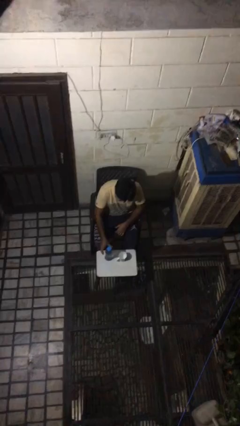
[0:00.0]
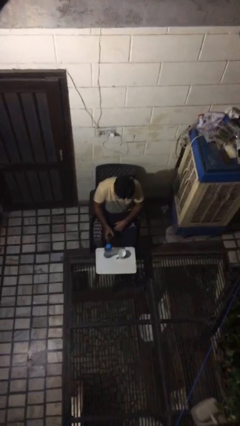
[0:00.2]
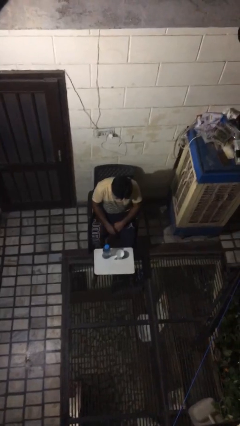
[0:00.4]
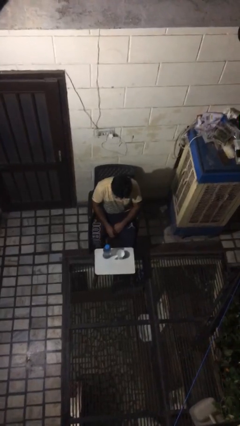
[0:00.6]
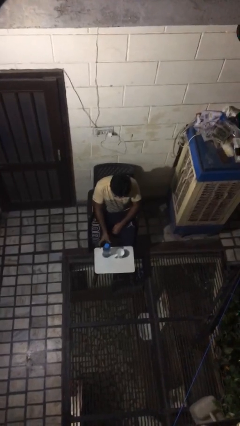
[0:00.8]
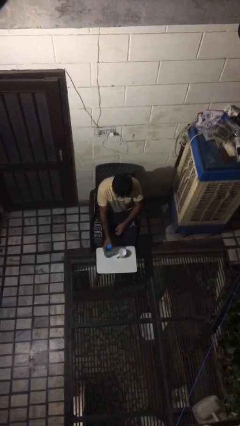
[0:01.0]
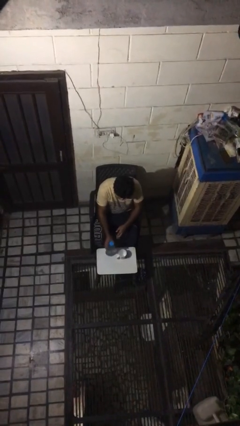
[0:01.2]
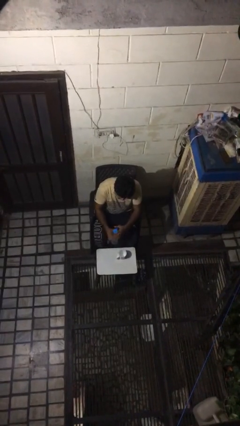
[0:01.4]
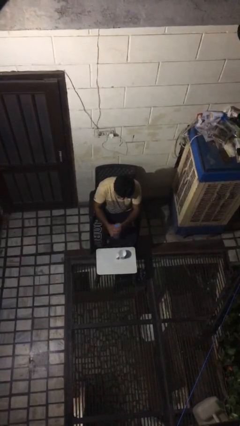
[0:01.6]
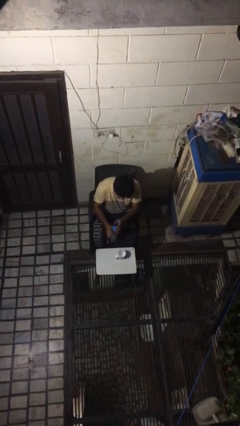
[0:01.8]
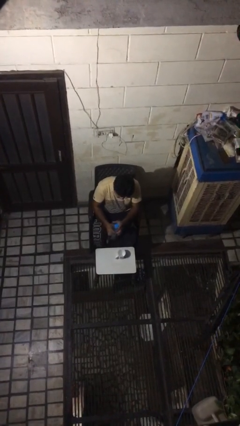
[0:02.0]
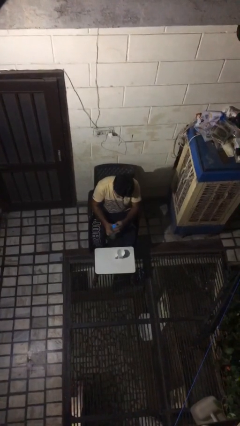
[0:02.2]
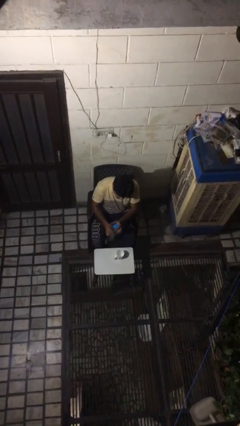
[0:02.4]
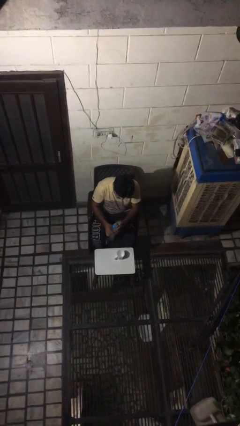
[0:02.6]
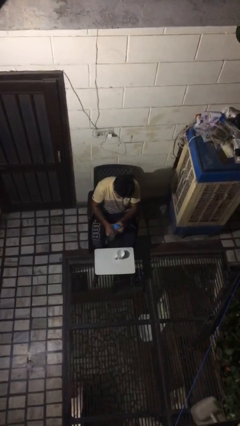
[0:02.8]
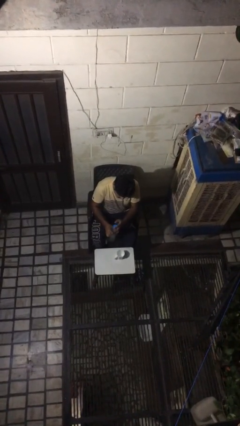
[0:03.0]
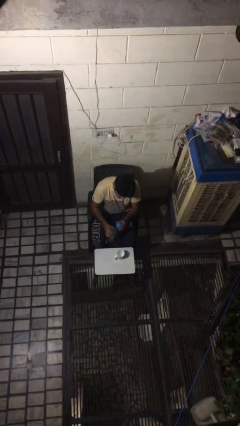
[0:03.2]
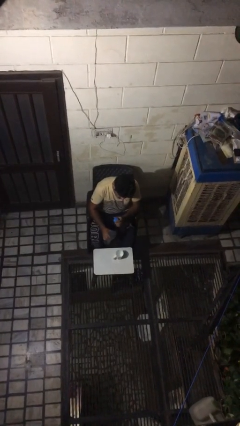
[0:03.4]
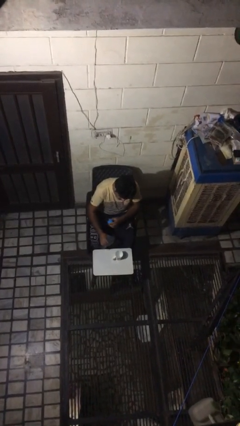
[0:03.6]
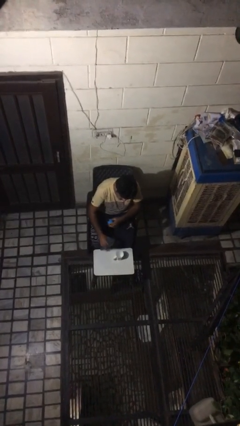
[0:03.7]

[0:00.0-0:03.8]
person unscrews lid from bottle

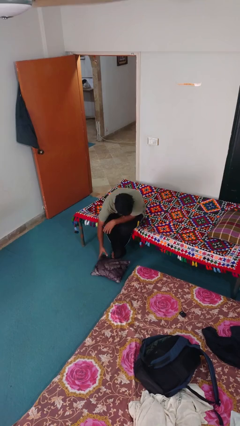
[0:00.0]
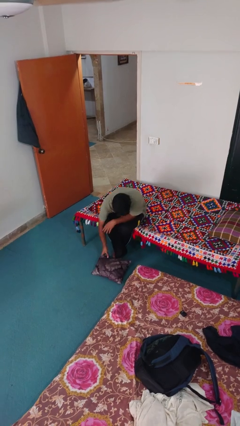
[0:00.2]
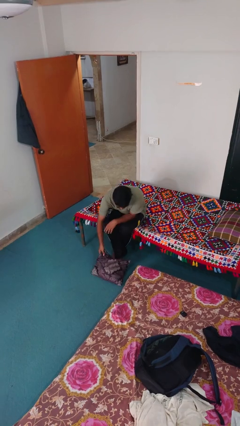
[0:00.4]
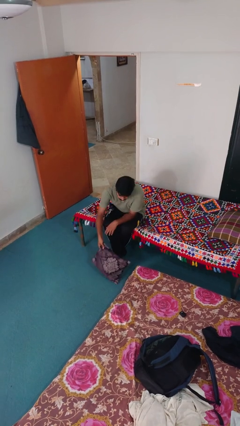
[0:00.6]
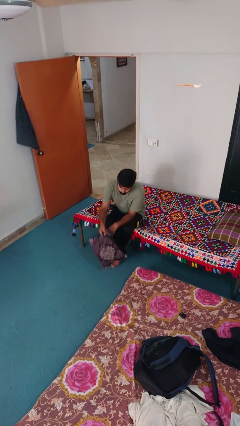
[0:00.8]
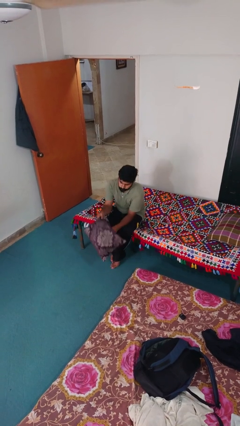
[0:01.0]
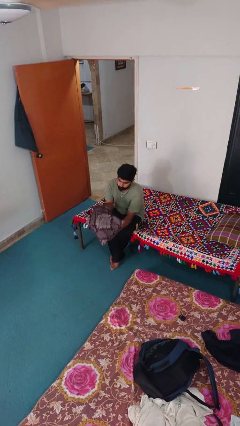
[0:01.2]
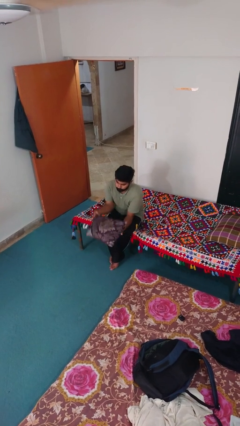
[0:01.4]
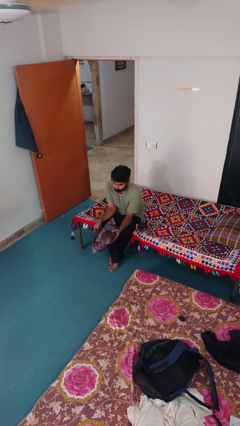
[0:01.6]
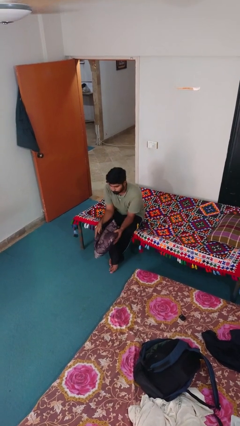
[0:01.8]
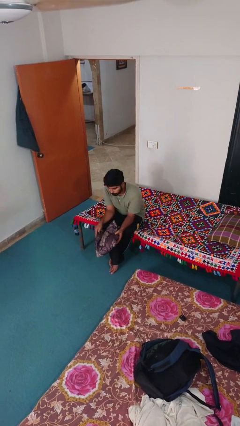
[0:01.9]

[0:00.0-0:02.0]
person picks up object from floor

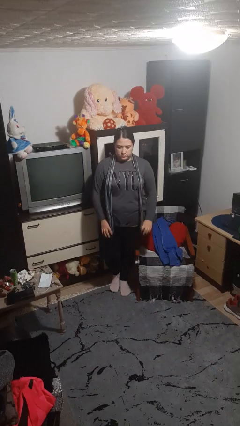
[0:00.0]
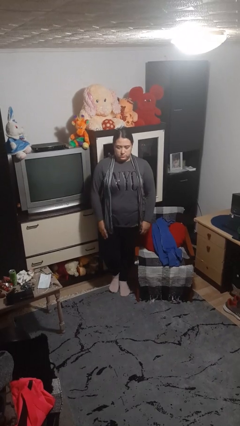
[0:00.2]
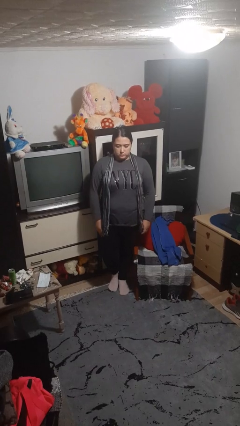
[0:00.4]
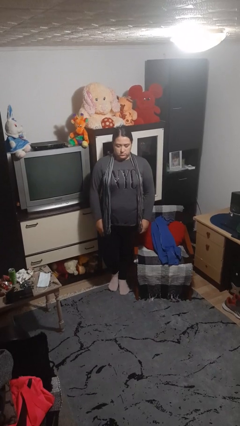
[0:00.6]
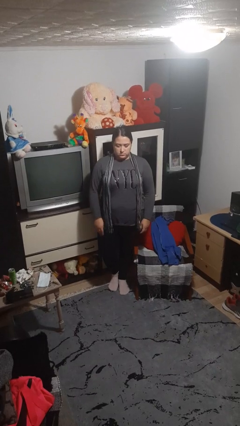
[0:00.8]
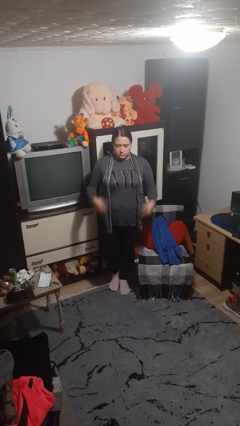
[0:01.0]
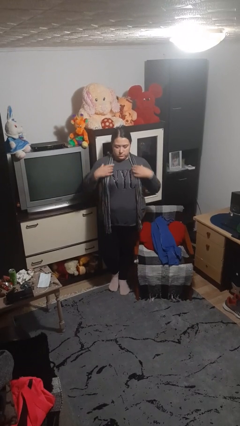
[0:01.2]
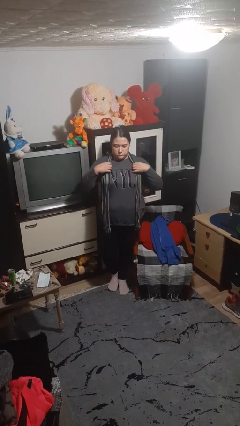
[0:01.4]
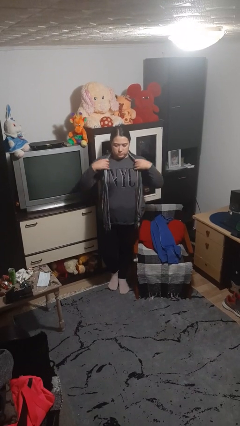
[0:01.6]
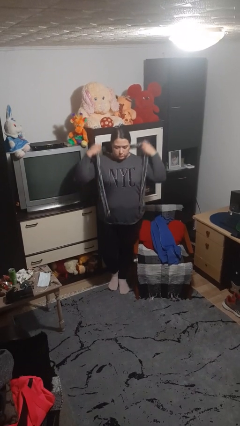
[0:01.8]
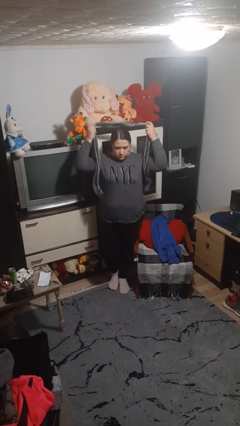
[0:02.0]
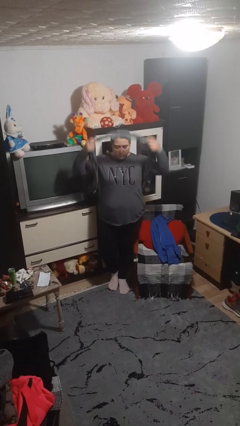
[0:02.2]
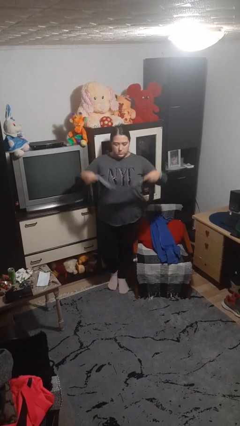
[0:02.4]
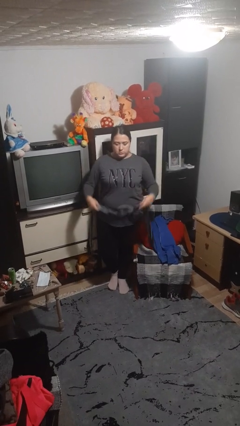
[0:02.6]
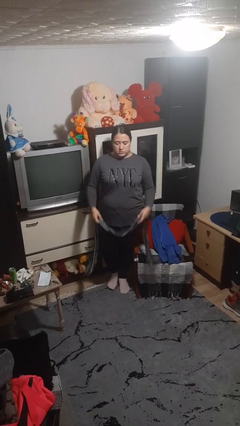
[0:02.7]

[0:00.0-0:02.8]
person takes off scarf

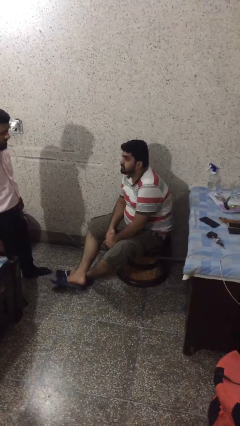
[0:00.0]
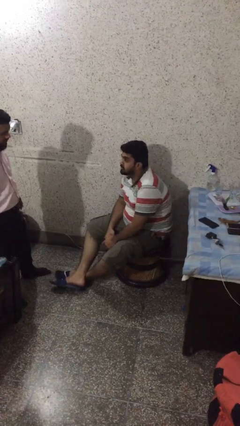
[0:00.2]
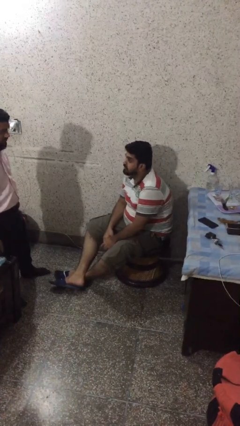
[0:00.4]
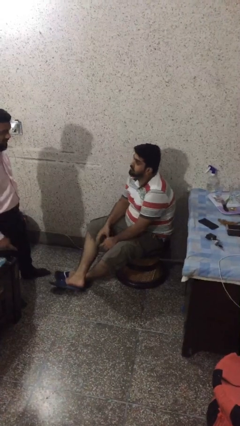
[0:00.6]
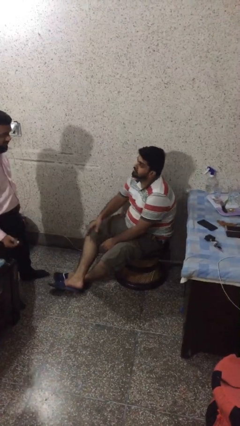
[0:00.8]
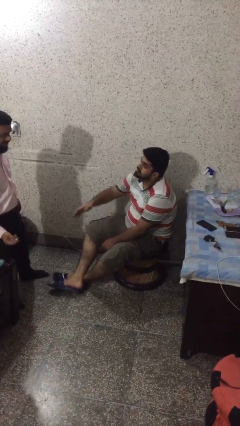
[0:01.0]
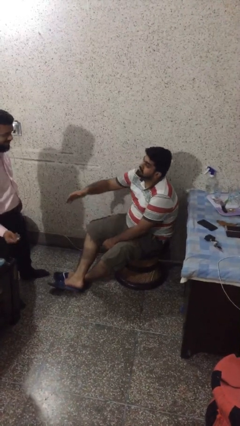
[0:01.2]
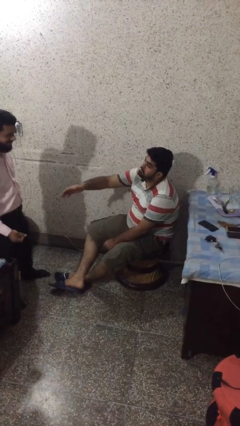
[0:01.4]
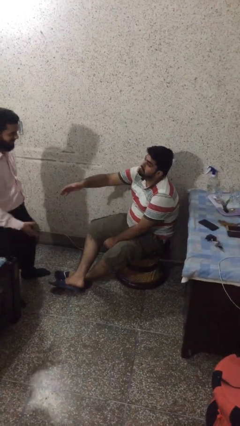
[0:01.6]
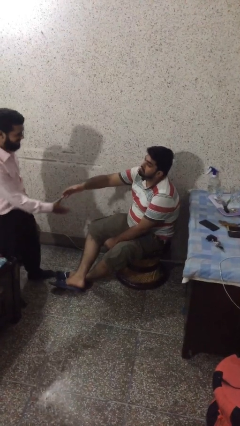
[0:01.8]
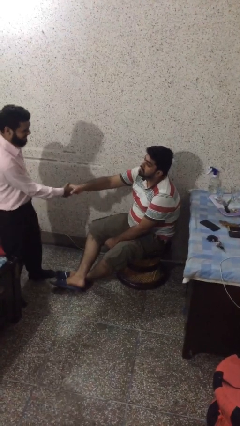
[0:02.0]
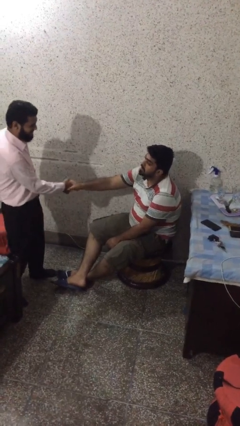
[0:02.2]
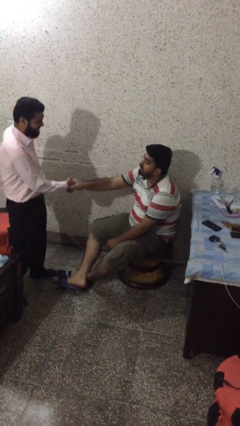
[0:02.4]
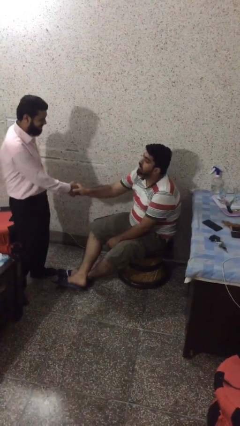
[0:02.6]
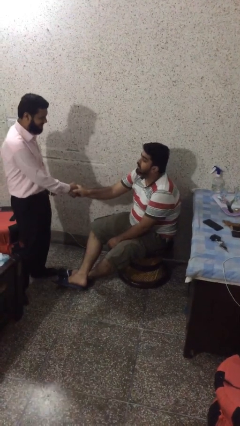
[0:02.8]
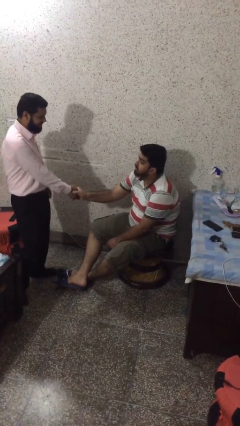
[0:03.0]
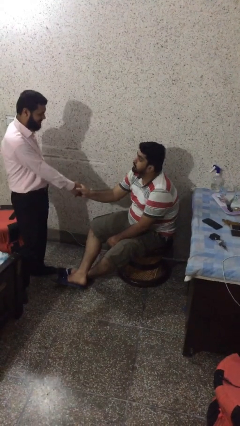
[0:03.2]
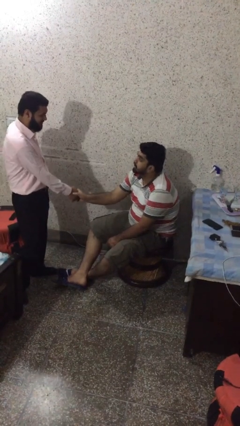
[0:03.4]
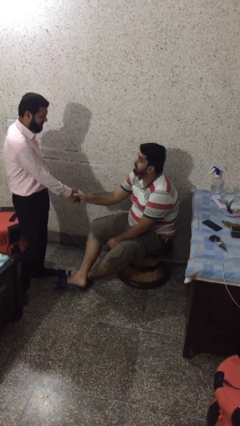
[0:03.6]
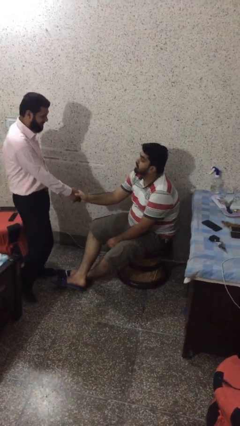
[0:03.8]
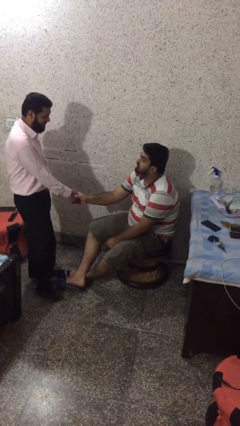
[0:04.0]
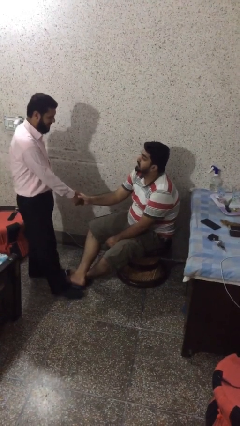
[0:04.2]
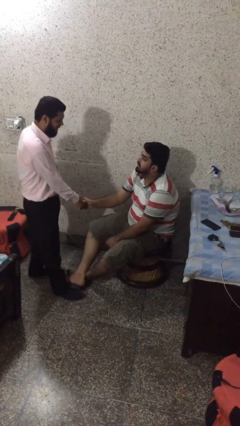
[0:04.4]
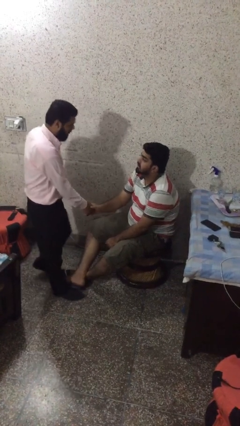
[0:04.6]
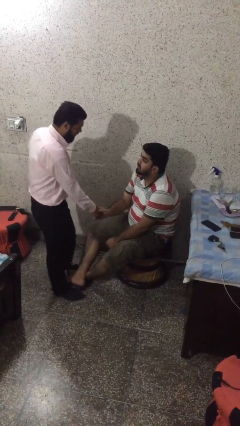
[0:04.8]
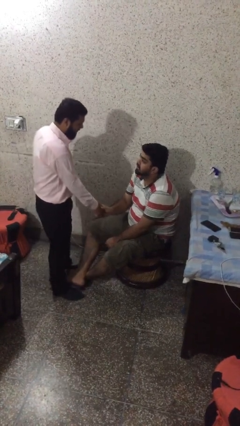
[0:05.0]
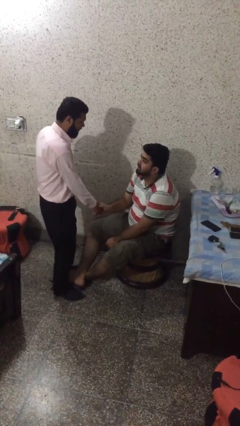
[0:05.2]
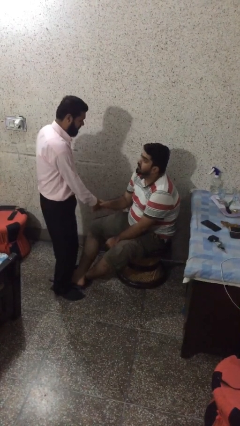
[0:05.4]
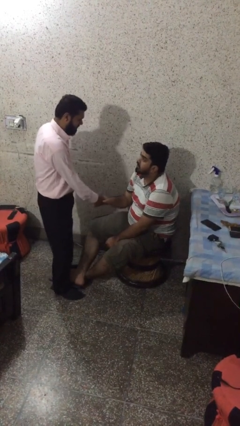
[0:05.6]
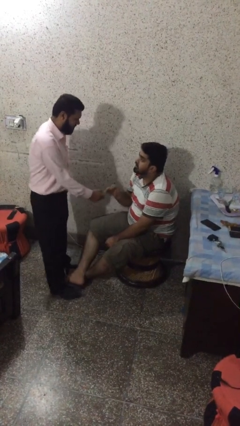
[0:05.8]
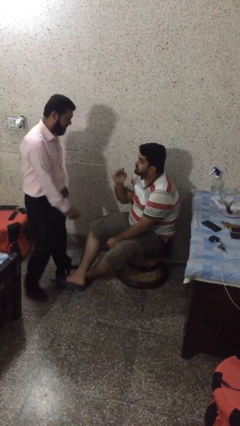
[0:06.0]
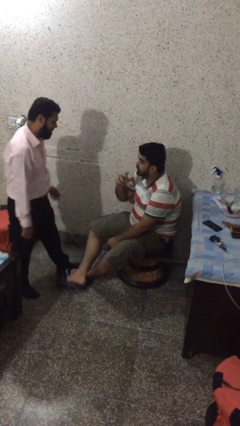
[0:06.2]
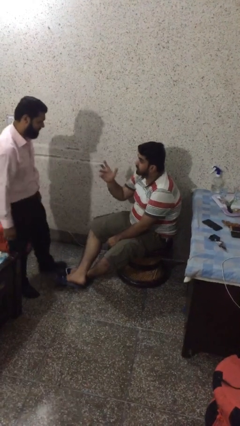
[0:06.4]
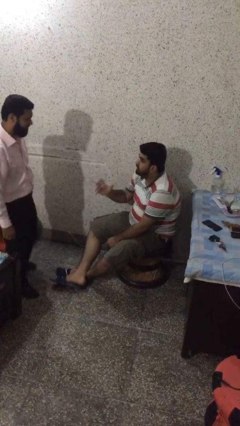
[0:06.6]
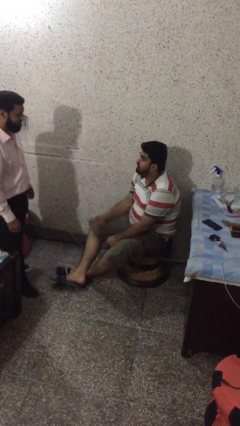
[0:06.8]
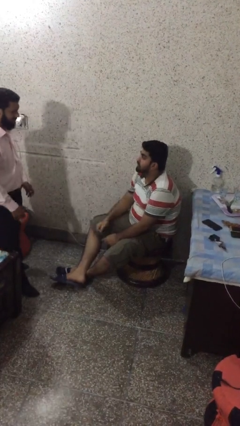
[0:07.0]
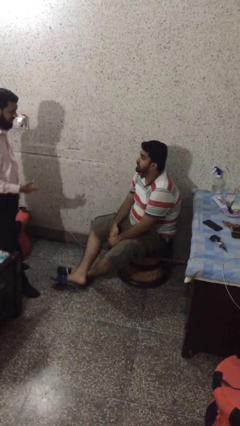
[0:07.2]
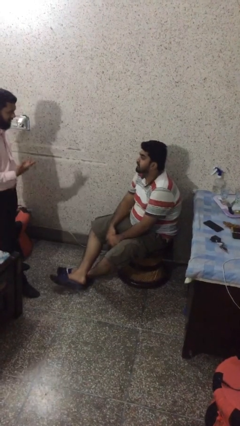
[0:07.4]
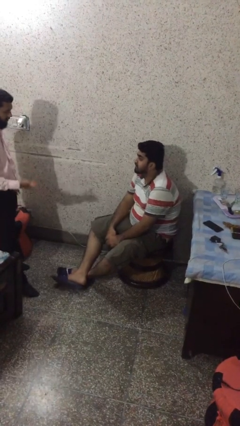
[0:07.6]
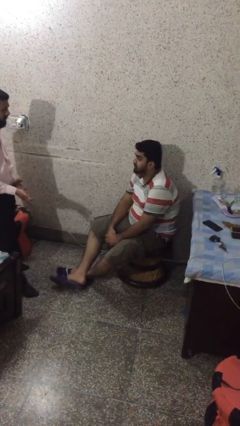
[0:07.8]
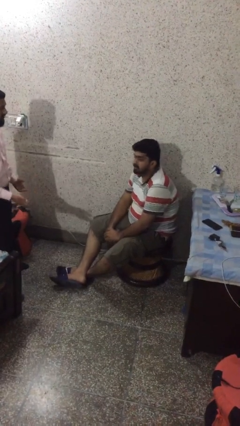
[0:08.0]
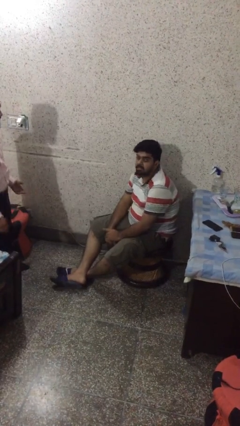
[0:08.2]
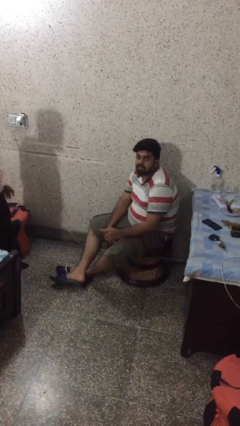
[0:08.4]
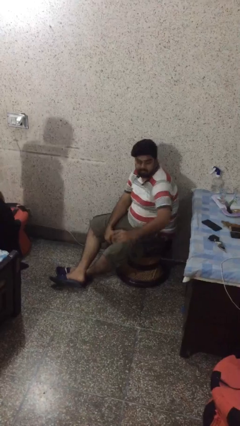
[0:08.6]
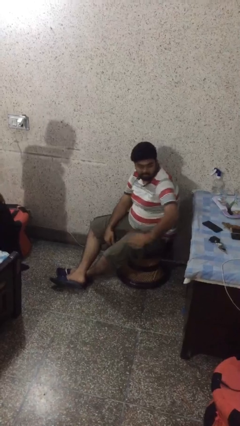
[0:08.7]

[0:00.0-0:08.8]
person shakes hand

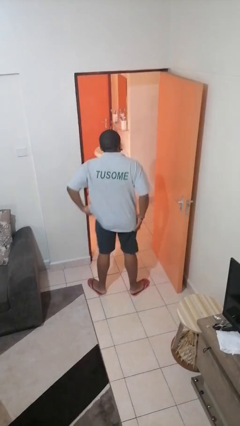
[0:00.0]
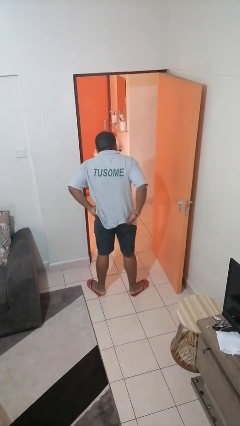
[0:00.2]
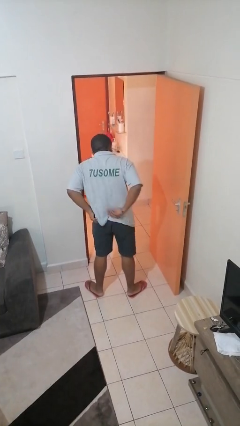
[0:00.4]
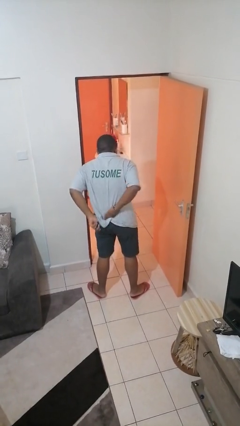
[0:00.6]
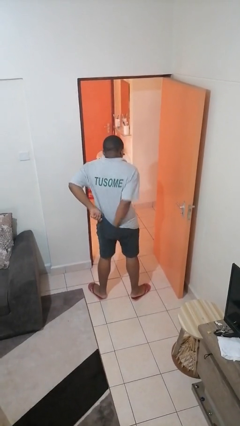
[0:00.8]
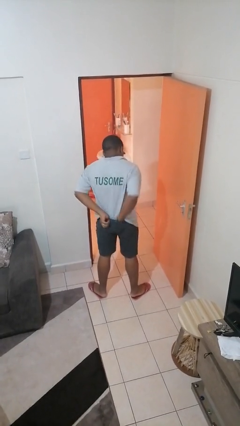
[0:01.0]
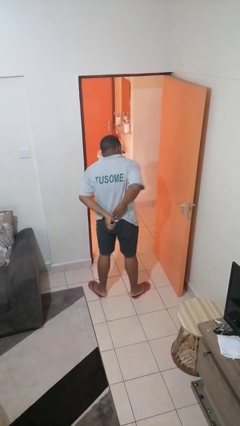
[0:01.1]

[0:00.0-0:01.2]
person tucks in shirt
